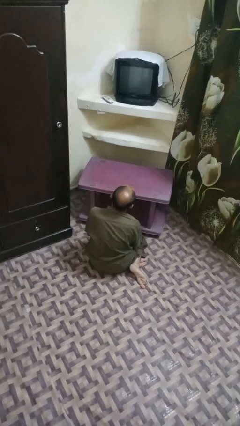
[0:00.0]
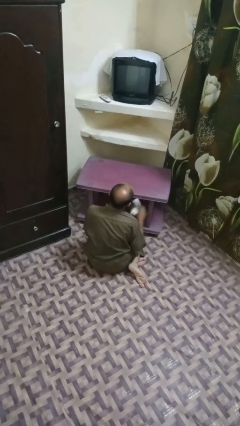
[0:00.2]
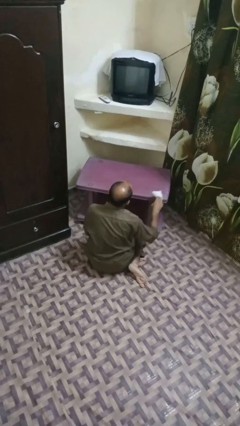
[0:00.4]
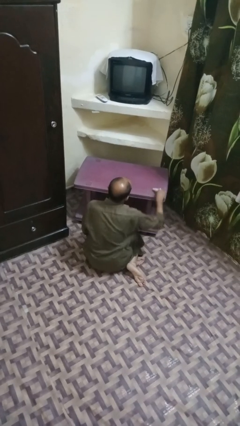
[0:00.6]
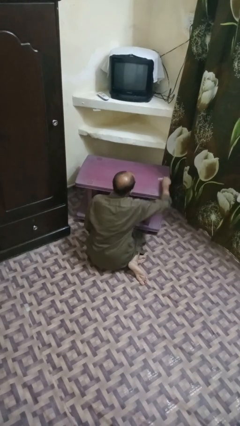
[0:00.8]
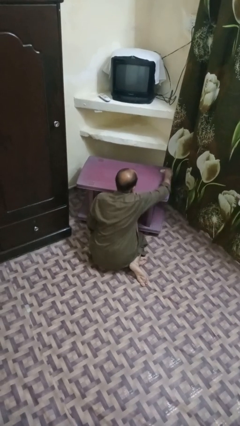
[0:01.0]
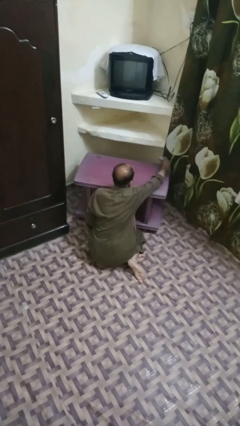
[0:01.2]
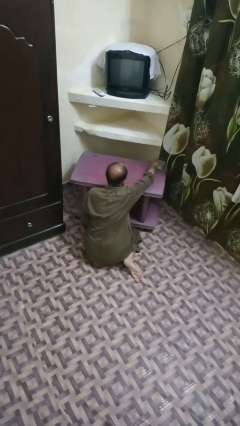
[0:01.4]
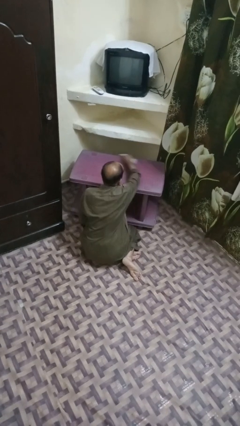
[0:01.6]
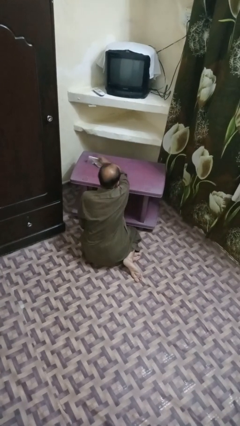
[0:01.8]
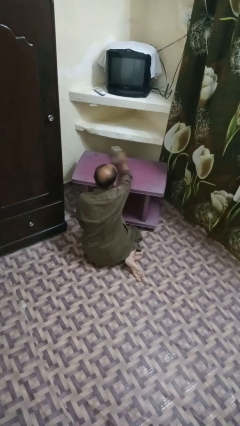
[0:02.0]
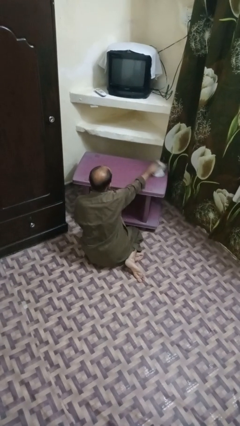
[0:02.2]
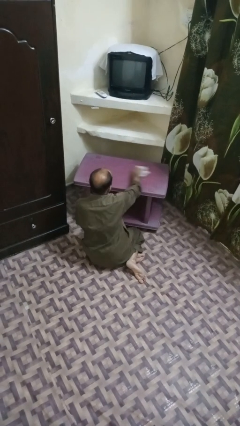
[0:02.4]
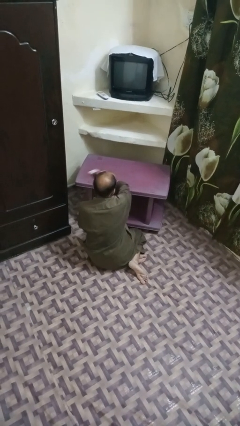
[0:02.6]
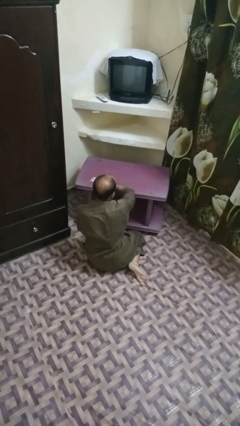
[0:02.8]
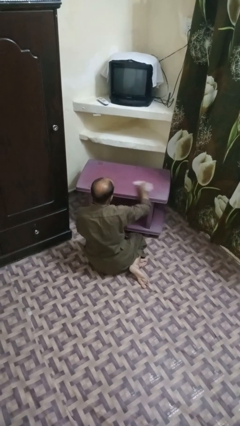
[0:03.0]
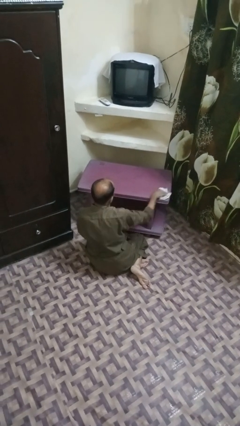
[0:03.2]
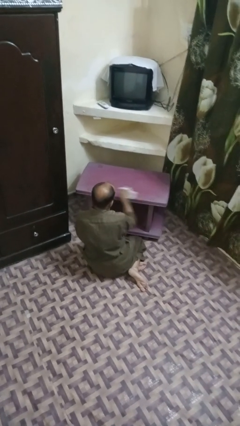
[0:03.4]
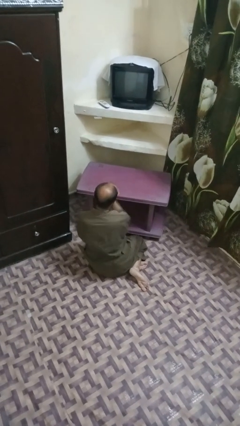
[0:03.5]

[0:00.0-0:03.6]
person cleans table with rag

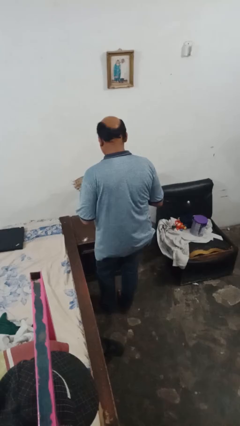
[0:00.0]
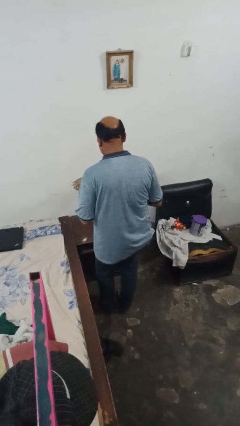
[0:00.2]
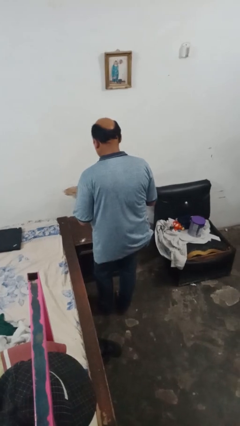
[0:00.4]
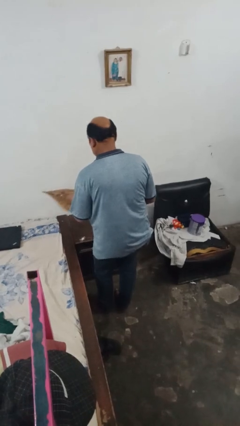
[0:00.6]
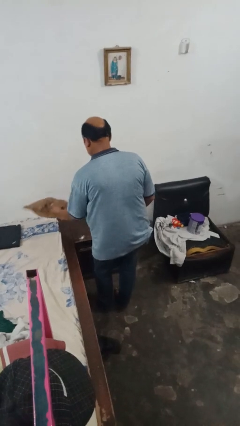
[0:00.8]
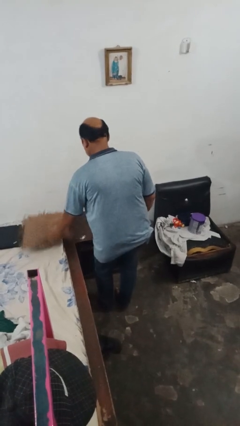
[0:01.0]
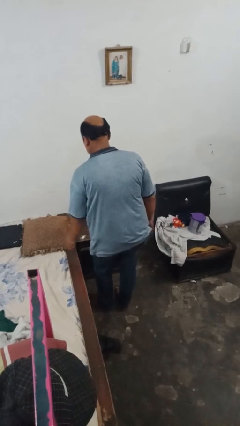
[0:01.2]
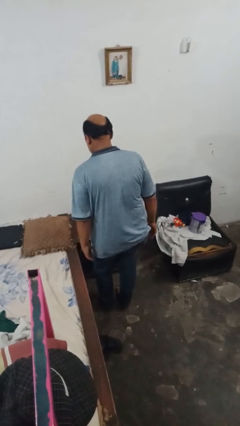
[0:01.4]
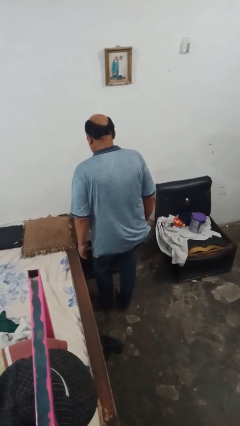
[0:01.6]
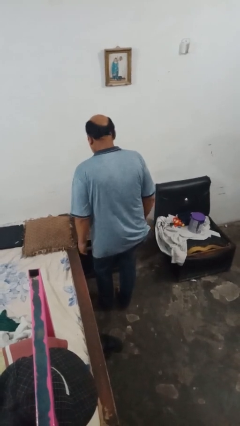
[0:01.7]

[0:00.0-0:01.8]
person puts down object on bed

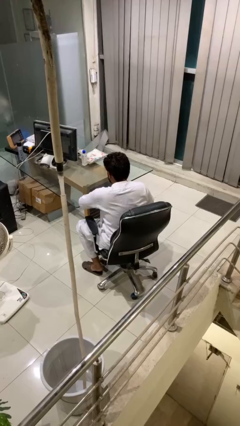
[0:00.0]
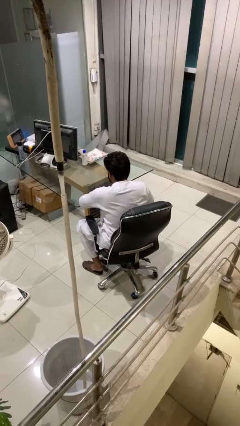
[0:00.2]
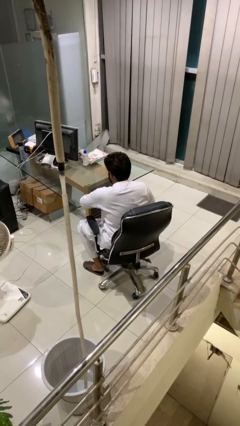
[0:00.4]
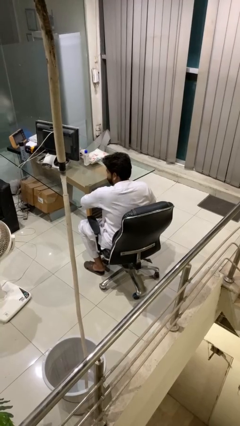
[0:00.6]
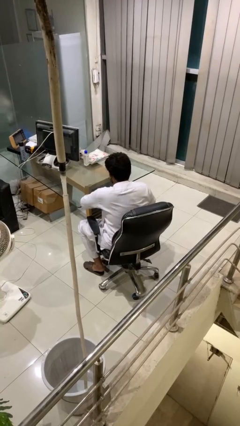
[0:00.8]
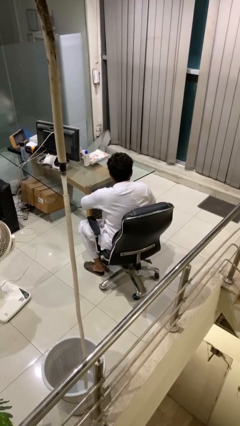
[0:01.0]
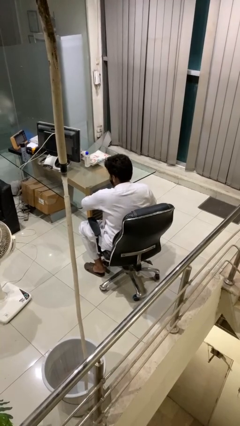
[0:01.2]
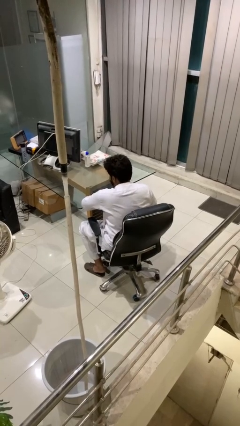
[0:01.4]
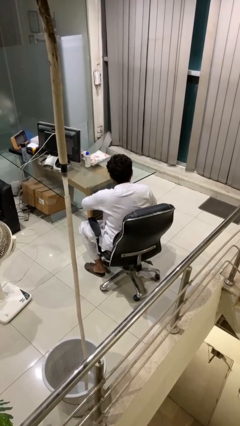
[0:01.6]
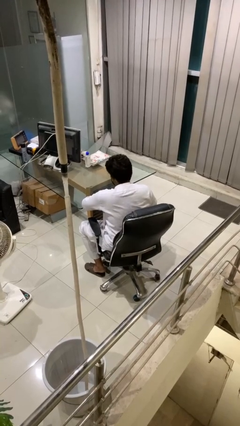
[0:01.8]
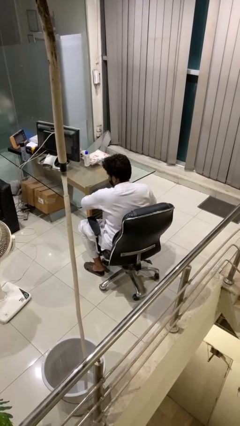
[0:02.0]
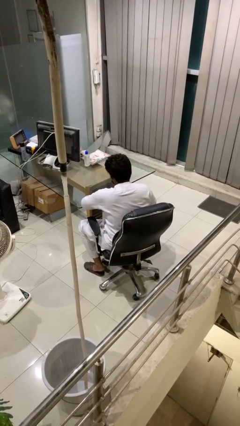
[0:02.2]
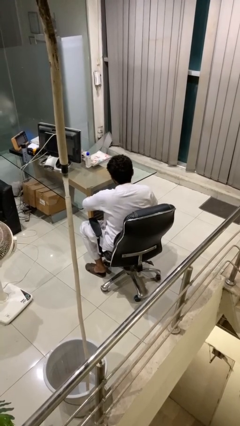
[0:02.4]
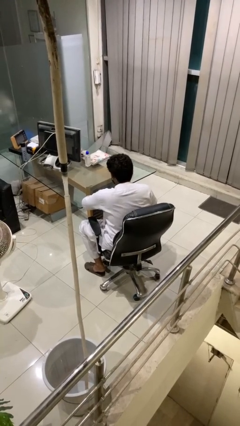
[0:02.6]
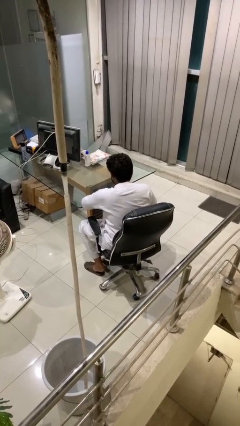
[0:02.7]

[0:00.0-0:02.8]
person shakes head

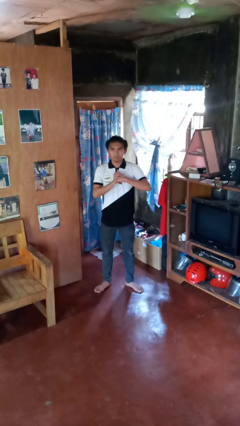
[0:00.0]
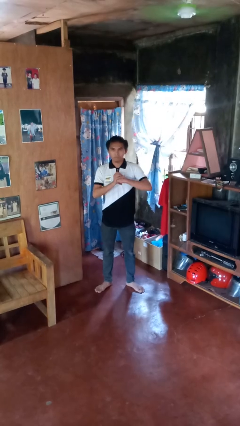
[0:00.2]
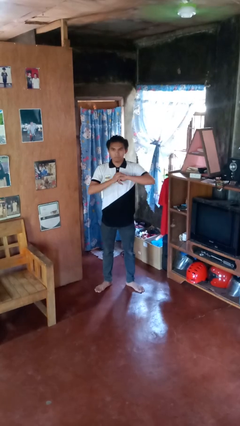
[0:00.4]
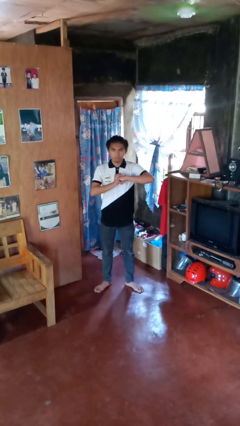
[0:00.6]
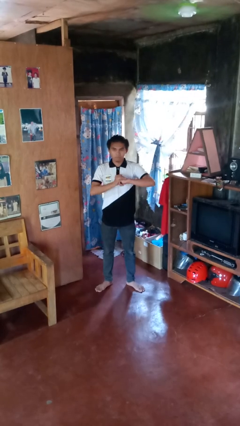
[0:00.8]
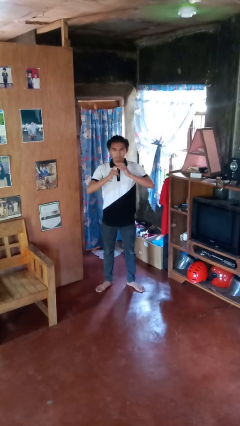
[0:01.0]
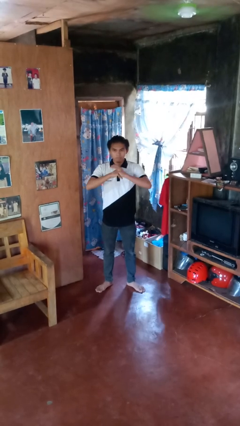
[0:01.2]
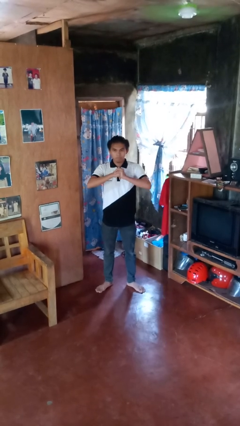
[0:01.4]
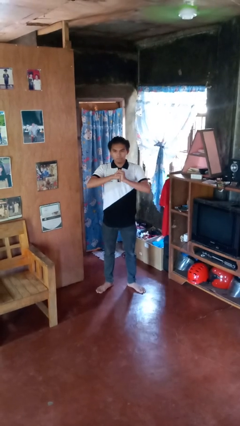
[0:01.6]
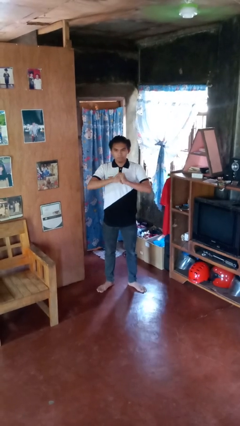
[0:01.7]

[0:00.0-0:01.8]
person cracks knuckles

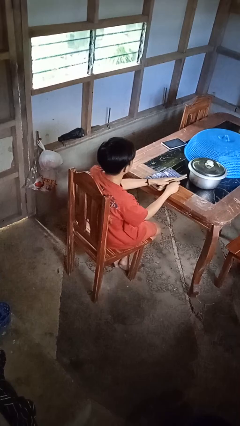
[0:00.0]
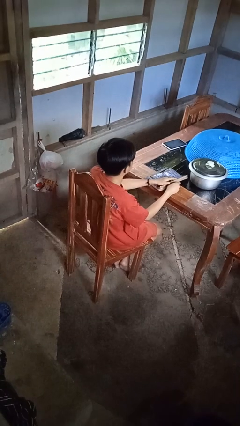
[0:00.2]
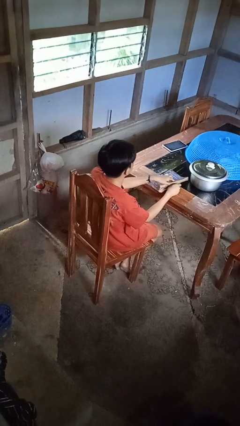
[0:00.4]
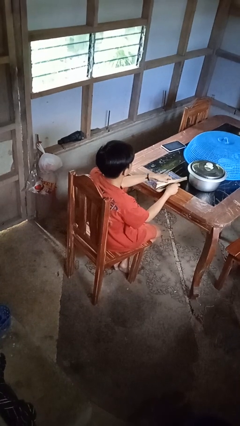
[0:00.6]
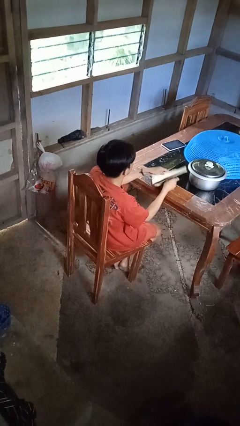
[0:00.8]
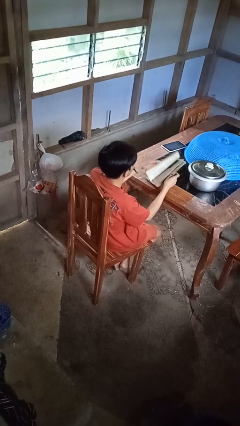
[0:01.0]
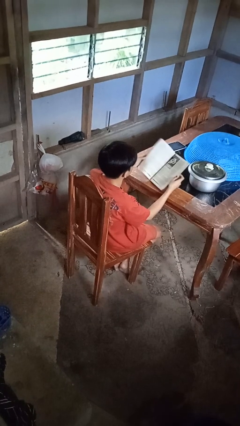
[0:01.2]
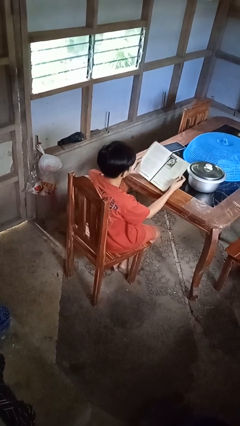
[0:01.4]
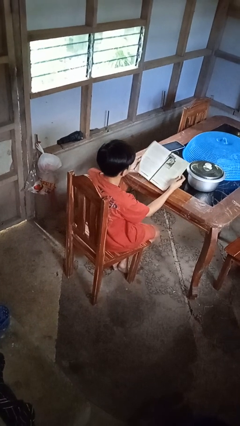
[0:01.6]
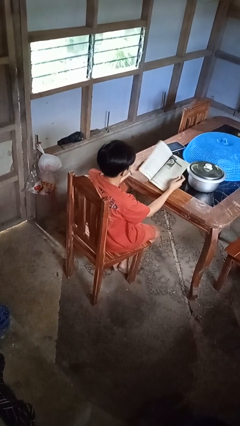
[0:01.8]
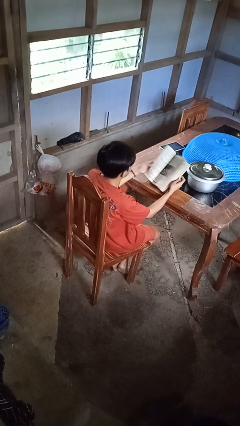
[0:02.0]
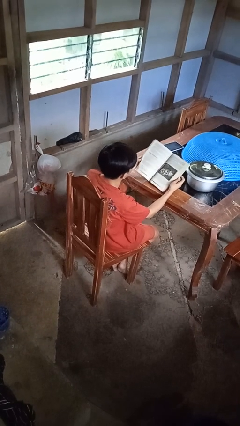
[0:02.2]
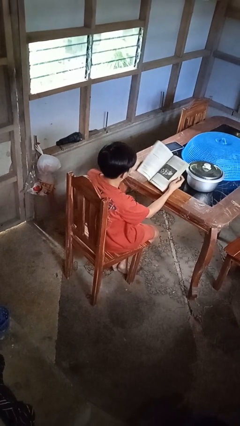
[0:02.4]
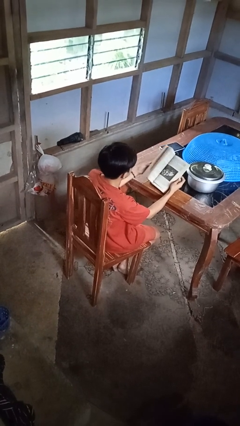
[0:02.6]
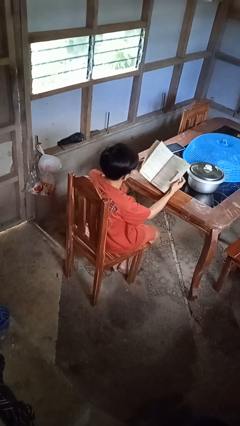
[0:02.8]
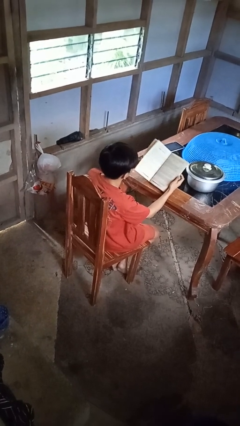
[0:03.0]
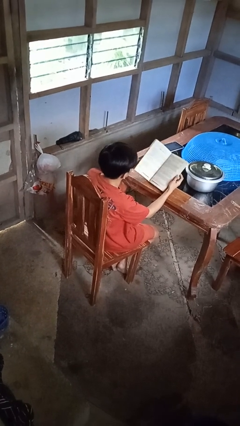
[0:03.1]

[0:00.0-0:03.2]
person reads book

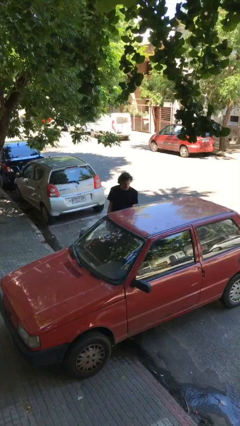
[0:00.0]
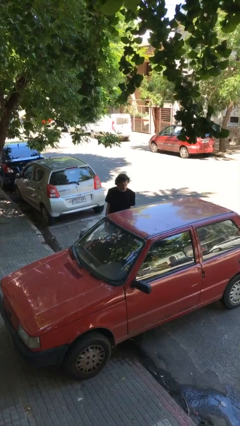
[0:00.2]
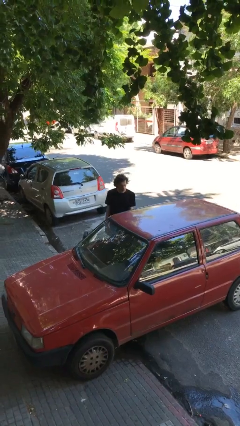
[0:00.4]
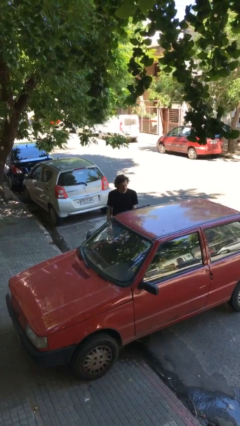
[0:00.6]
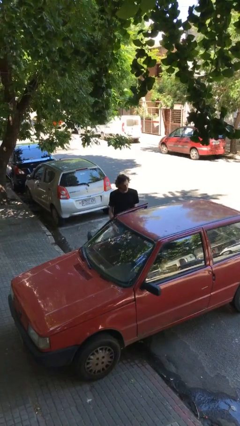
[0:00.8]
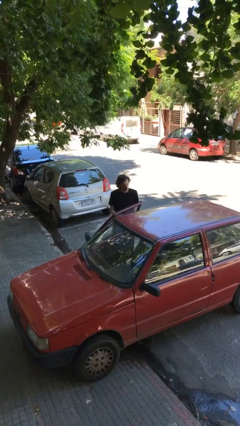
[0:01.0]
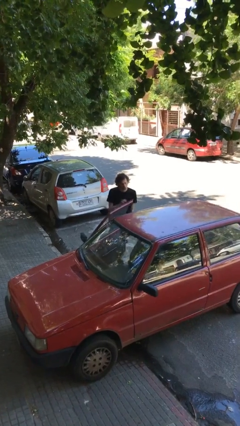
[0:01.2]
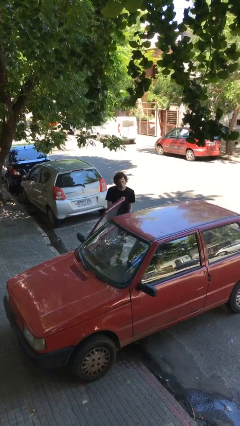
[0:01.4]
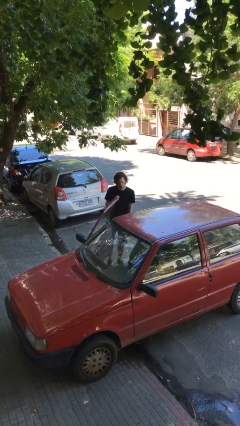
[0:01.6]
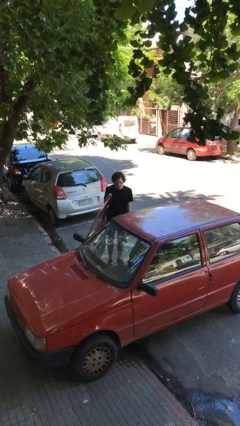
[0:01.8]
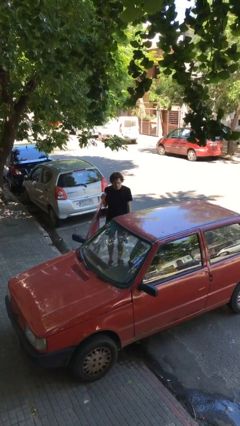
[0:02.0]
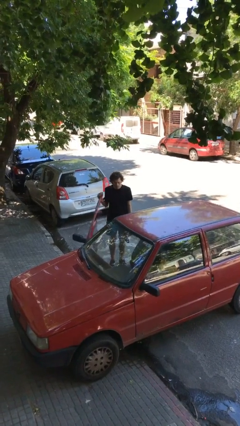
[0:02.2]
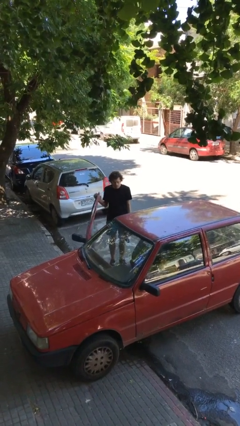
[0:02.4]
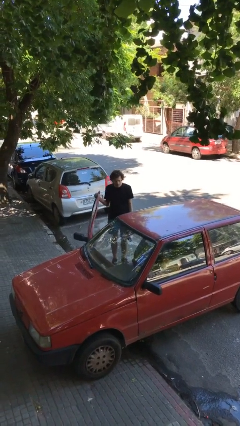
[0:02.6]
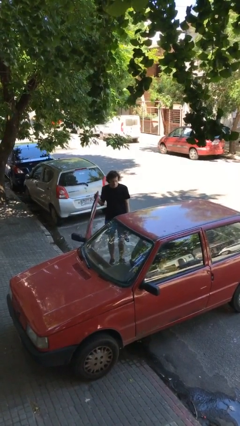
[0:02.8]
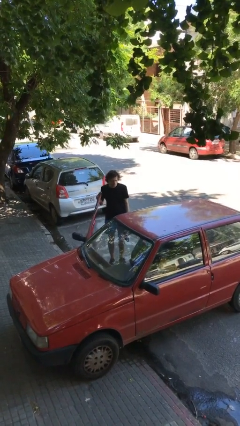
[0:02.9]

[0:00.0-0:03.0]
person opens car door

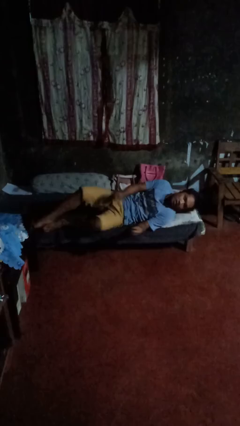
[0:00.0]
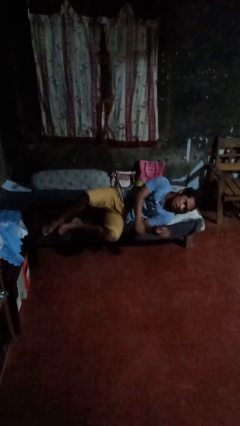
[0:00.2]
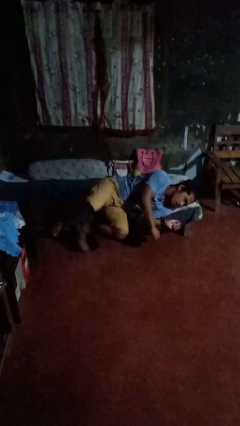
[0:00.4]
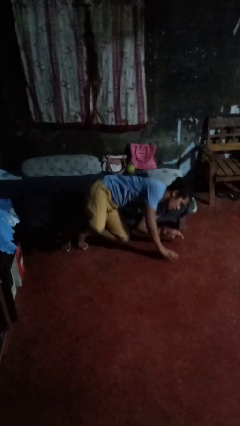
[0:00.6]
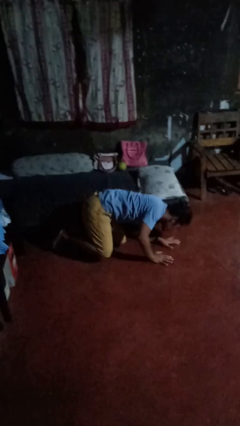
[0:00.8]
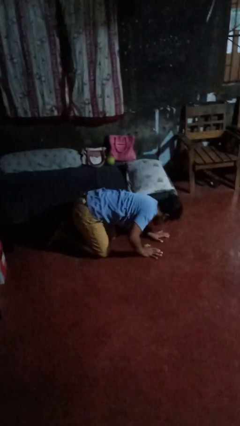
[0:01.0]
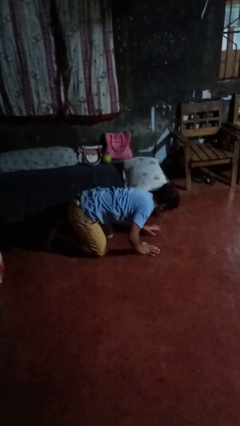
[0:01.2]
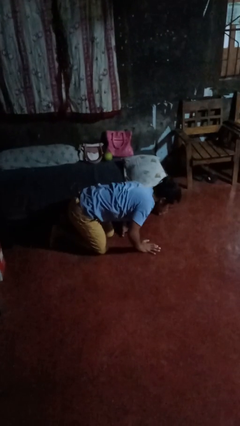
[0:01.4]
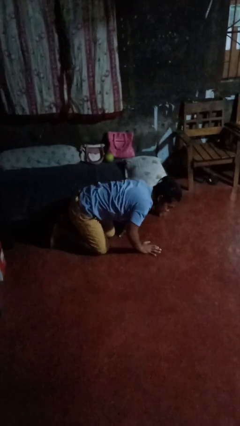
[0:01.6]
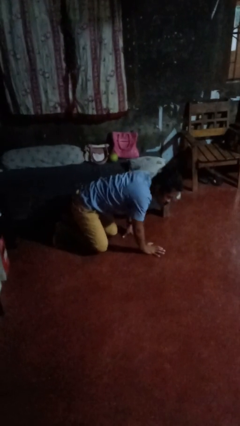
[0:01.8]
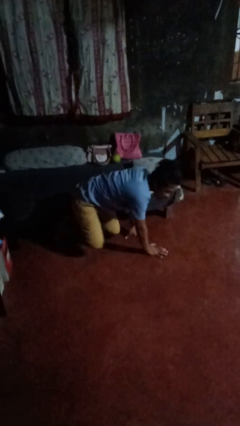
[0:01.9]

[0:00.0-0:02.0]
person falls from bed
